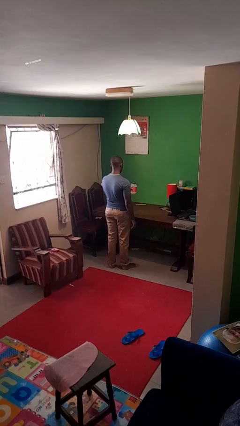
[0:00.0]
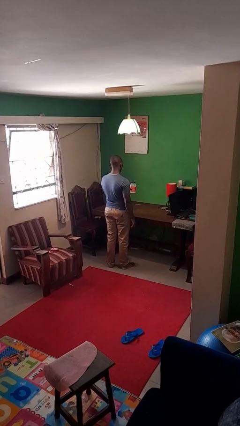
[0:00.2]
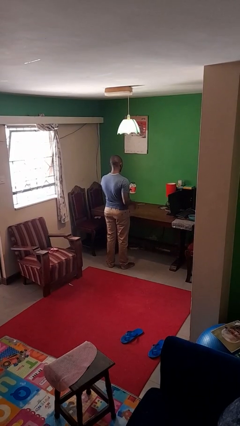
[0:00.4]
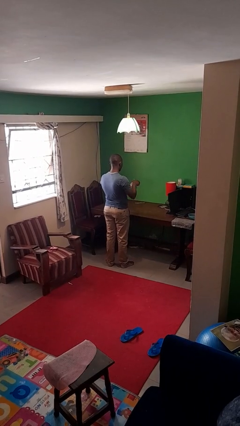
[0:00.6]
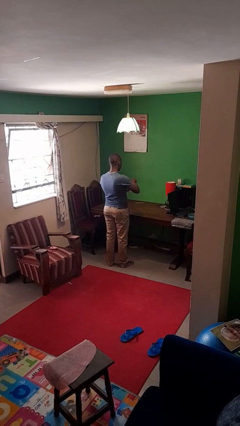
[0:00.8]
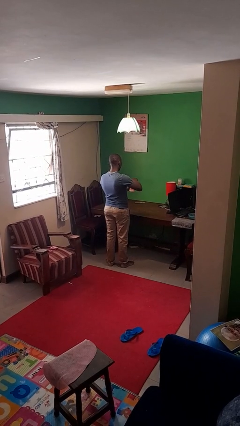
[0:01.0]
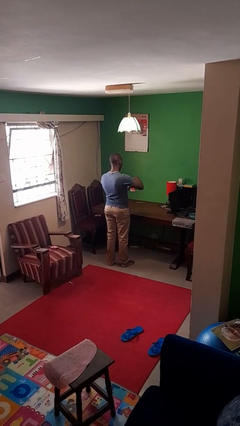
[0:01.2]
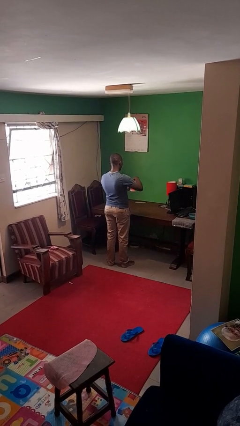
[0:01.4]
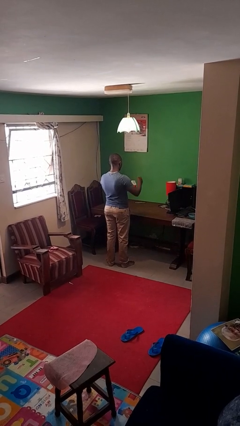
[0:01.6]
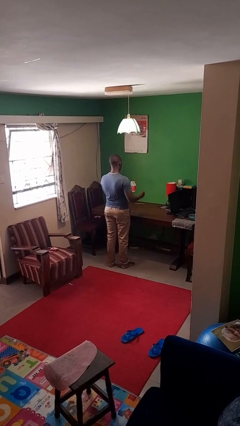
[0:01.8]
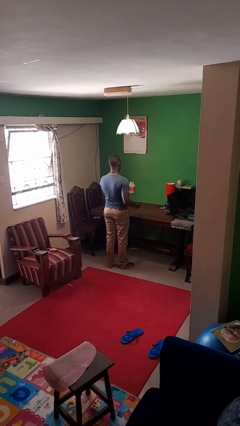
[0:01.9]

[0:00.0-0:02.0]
person opens jar

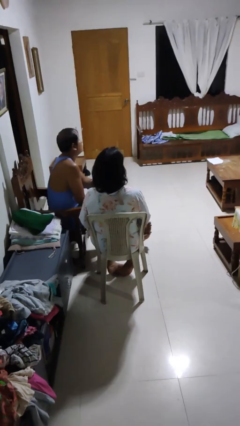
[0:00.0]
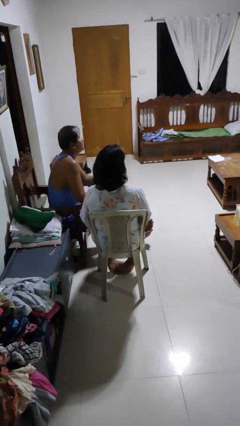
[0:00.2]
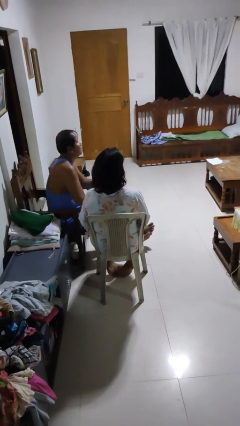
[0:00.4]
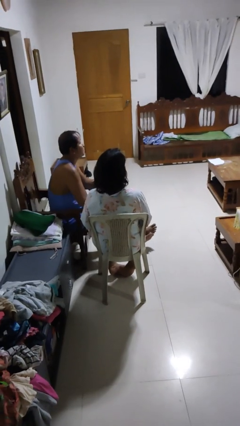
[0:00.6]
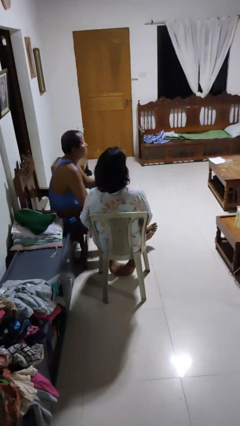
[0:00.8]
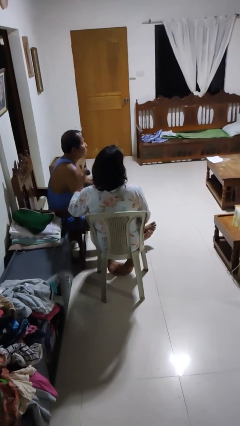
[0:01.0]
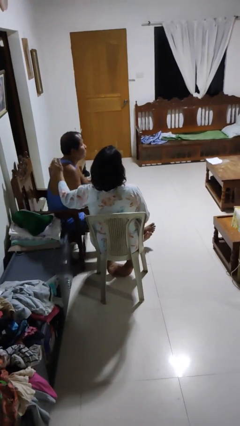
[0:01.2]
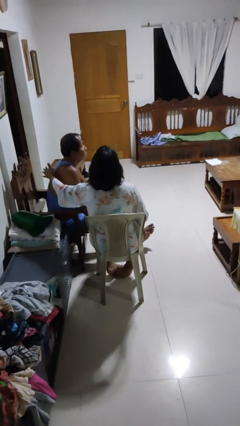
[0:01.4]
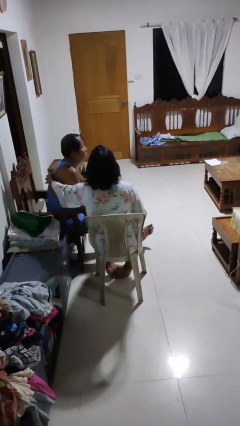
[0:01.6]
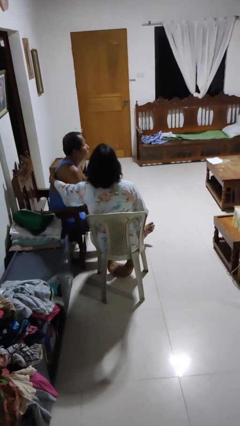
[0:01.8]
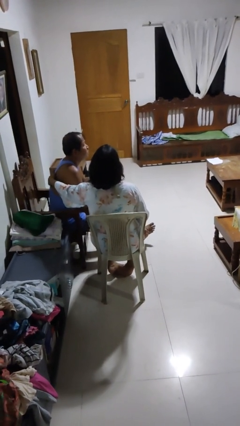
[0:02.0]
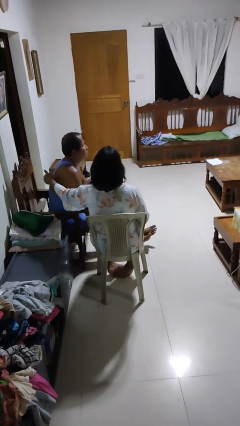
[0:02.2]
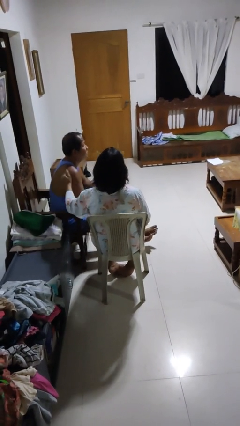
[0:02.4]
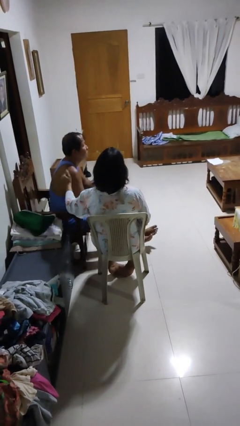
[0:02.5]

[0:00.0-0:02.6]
person touches back of person

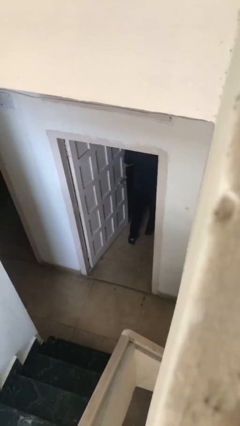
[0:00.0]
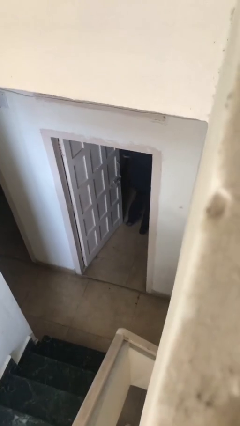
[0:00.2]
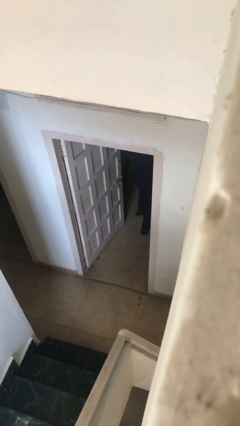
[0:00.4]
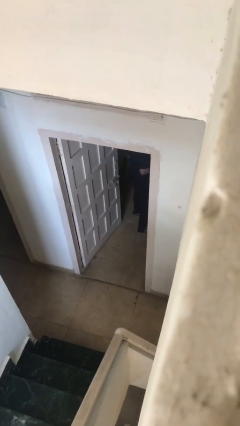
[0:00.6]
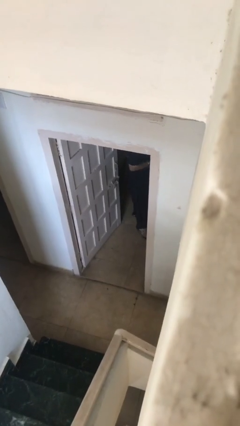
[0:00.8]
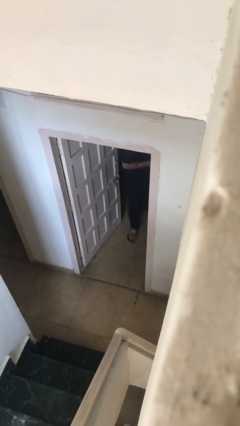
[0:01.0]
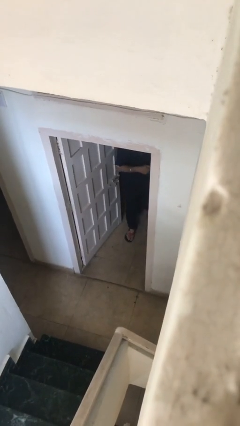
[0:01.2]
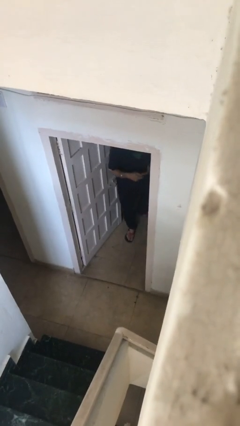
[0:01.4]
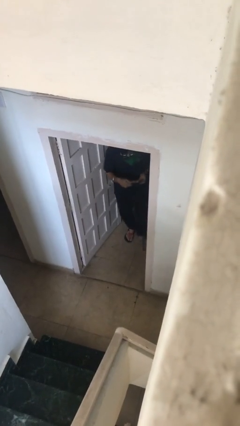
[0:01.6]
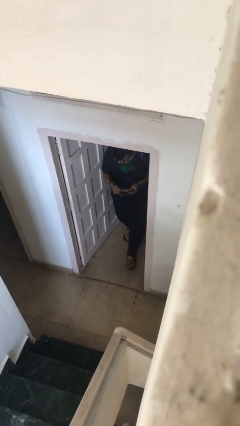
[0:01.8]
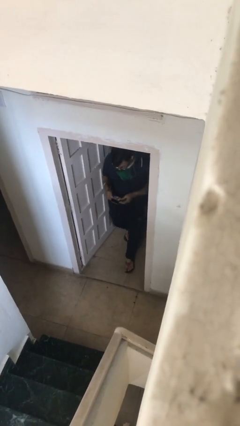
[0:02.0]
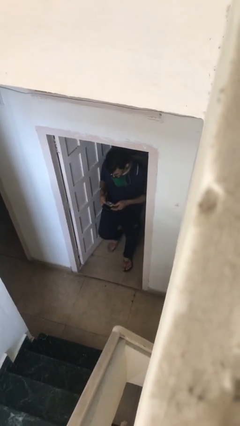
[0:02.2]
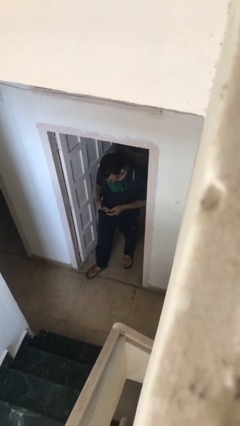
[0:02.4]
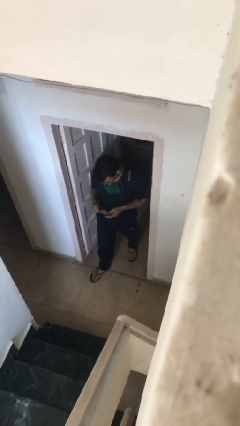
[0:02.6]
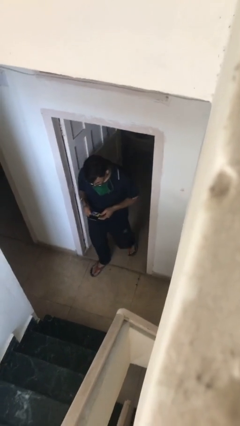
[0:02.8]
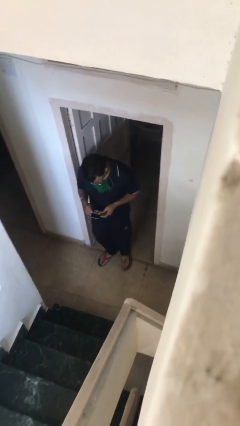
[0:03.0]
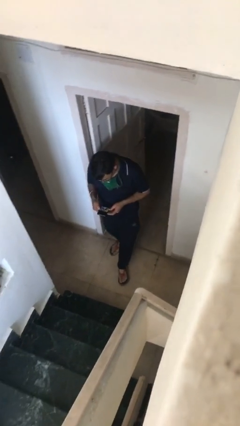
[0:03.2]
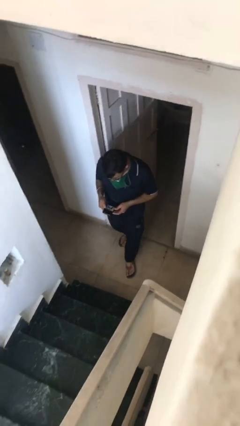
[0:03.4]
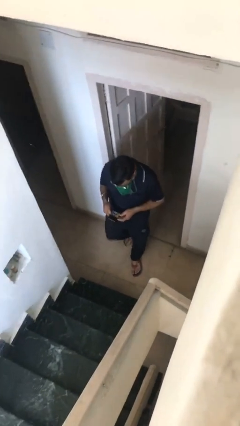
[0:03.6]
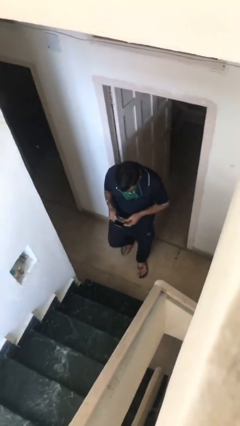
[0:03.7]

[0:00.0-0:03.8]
person enters scene through structure

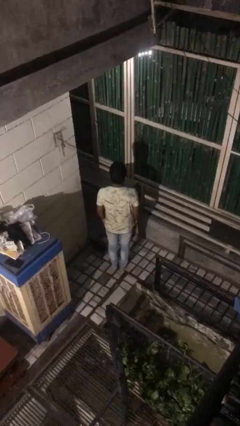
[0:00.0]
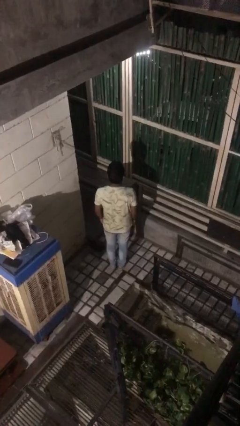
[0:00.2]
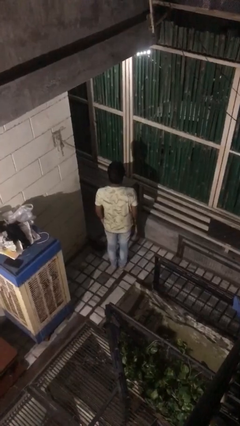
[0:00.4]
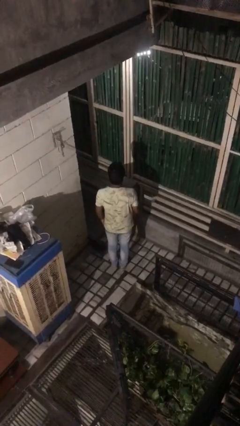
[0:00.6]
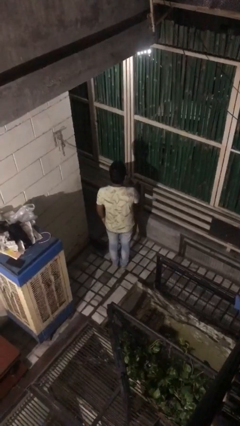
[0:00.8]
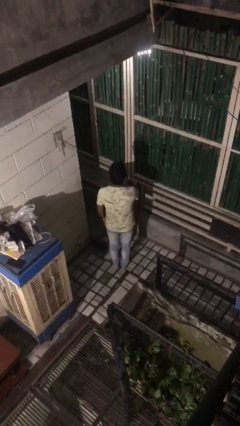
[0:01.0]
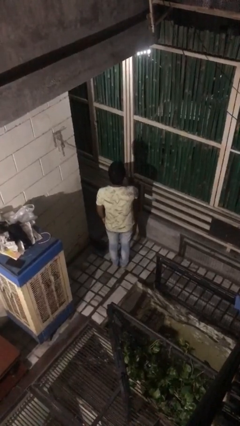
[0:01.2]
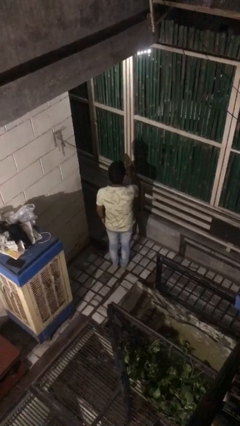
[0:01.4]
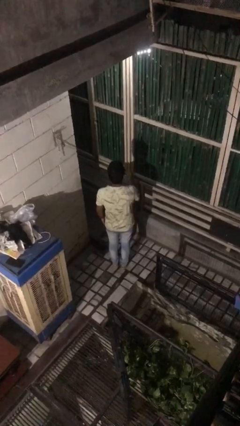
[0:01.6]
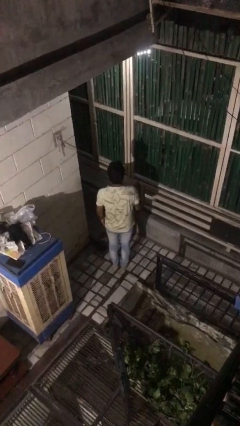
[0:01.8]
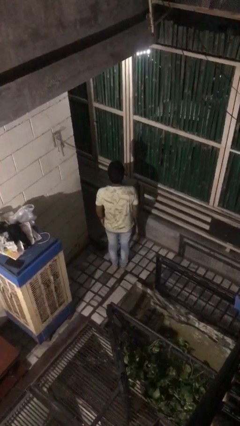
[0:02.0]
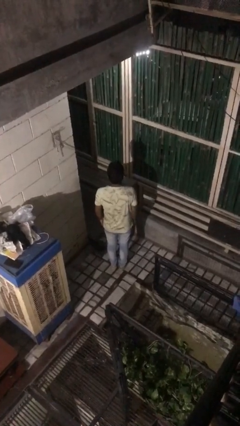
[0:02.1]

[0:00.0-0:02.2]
person gestures blow kiss

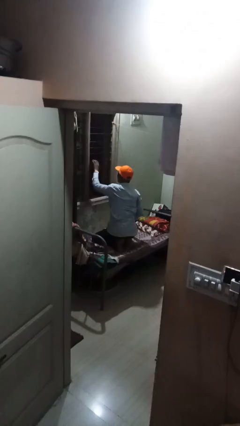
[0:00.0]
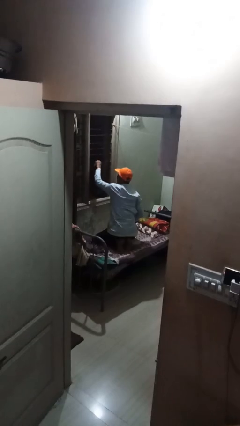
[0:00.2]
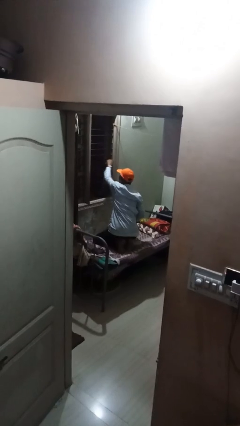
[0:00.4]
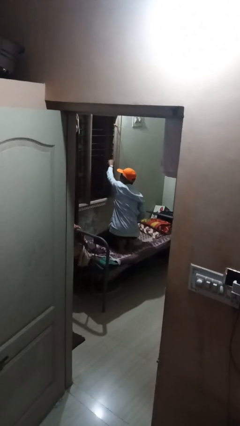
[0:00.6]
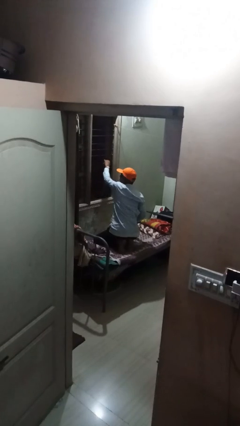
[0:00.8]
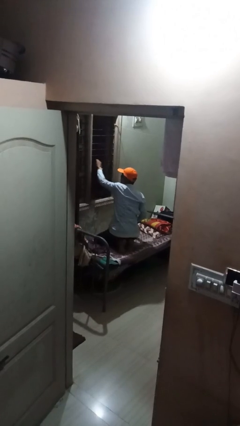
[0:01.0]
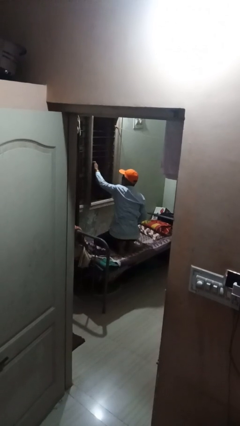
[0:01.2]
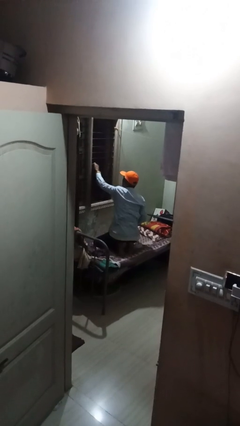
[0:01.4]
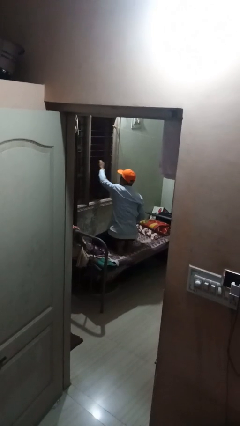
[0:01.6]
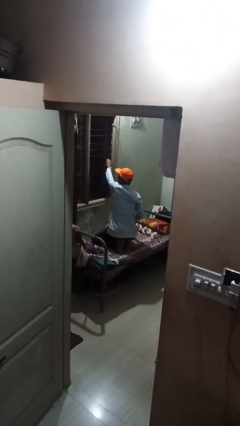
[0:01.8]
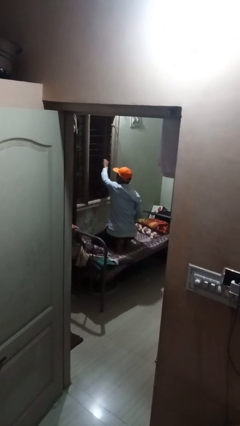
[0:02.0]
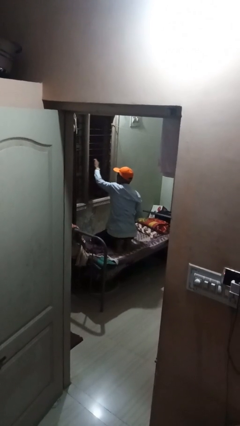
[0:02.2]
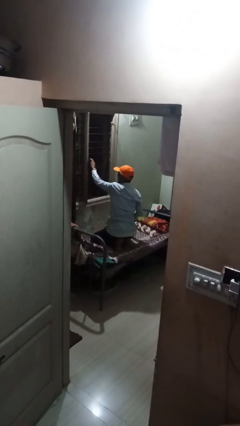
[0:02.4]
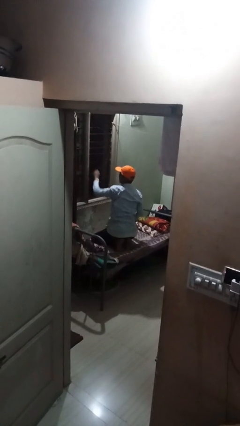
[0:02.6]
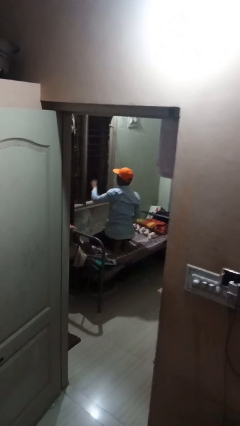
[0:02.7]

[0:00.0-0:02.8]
person washes window

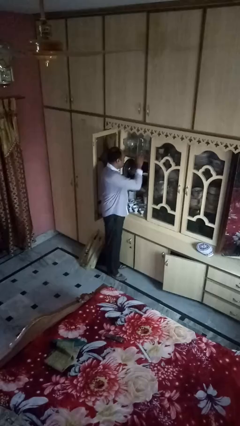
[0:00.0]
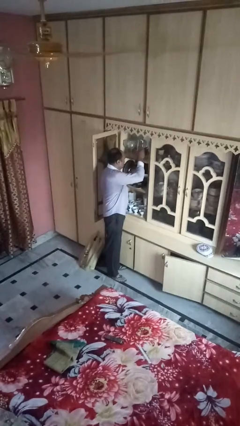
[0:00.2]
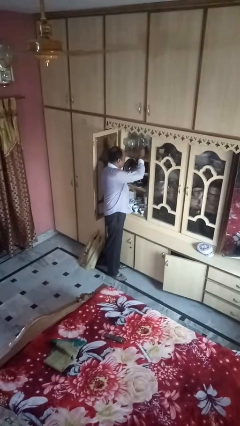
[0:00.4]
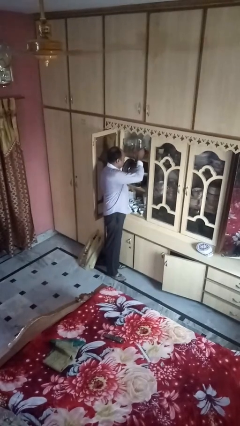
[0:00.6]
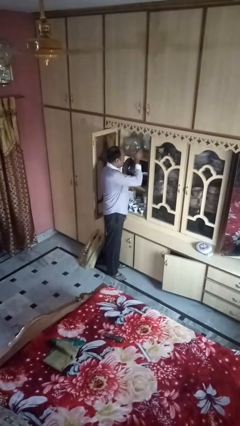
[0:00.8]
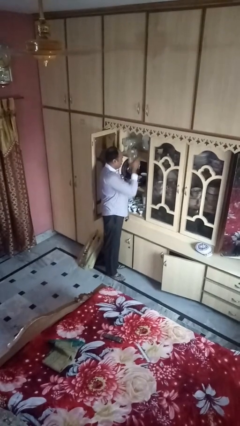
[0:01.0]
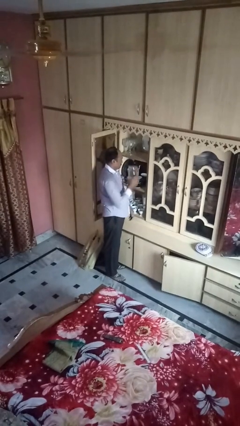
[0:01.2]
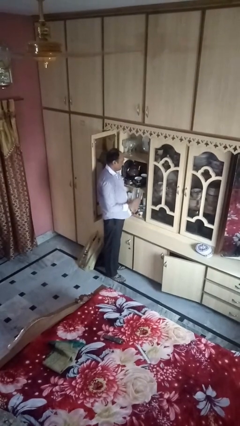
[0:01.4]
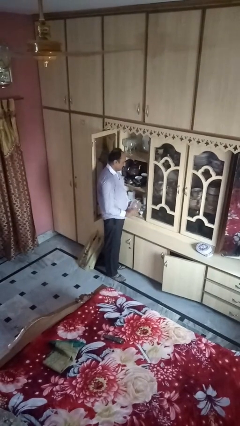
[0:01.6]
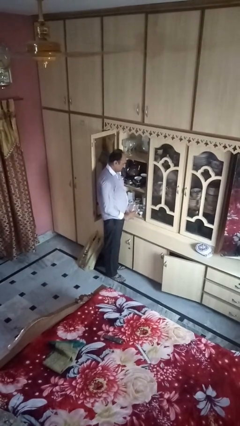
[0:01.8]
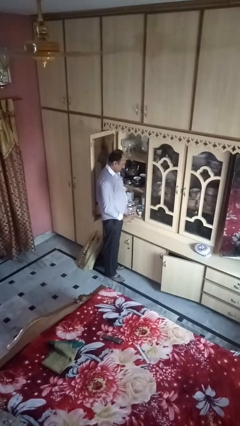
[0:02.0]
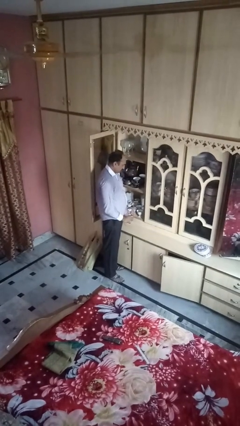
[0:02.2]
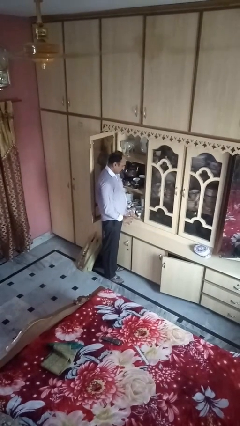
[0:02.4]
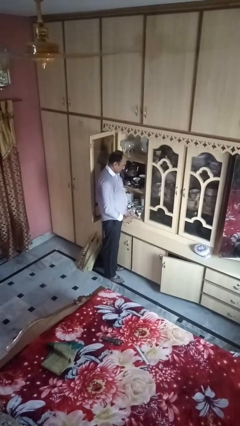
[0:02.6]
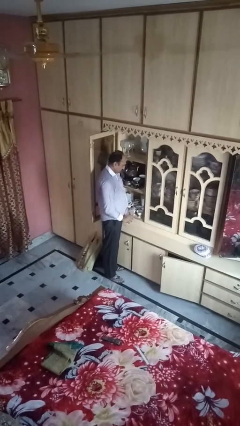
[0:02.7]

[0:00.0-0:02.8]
person picks up object from cabinet

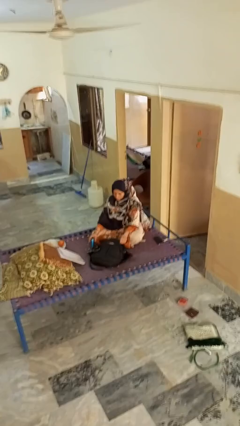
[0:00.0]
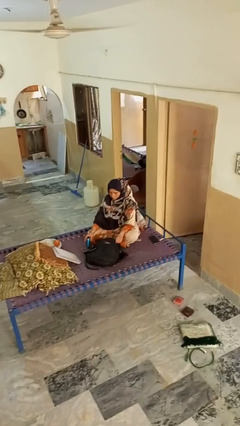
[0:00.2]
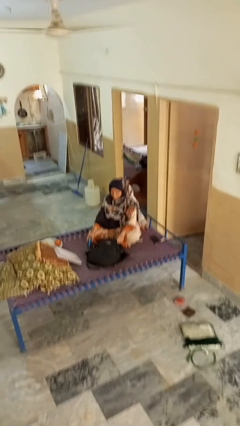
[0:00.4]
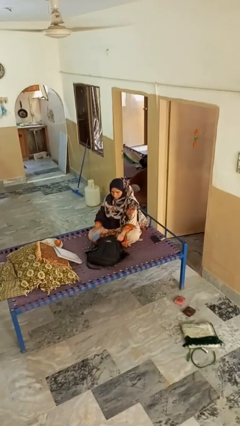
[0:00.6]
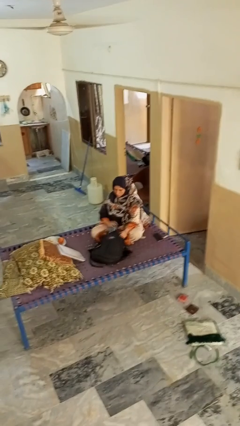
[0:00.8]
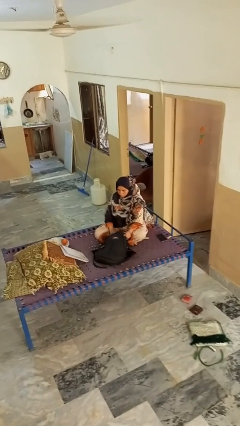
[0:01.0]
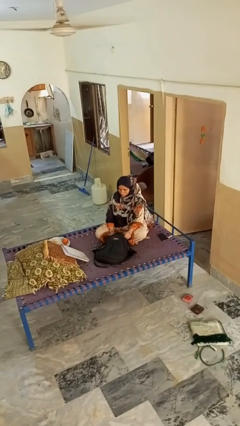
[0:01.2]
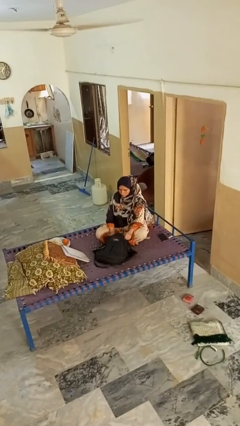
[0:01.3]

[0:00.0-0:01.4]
person puts object into bag
